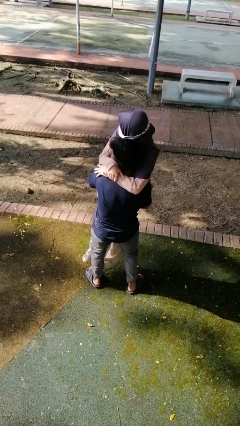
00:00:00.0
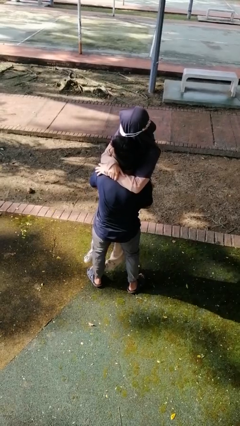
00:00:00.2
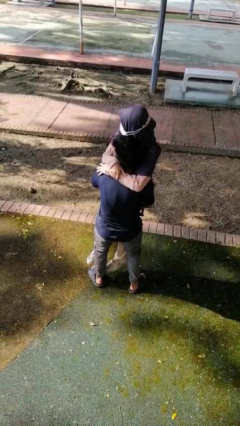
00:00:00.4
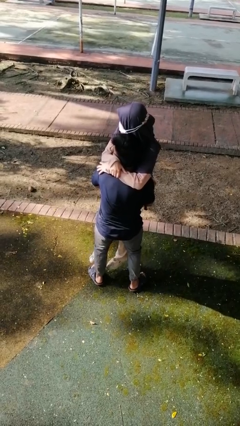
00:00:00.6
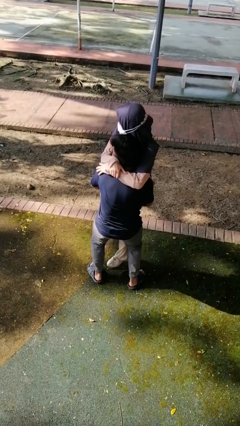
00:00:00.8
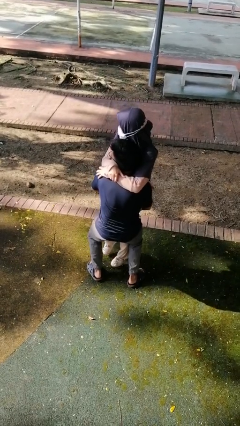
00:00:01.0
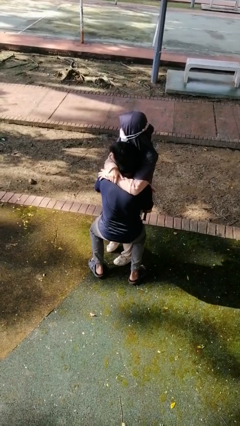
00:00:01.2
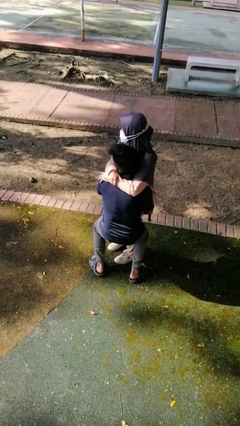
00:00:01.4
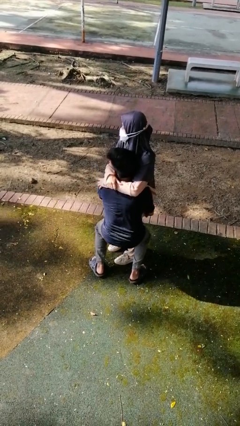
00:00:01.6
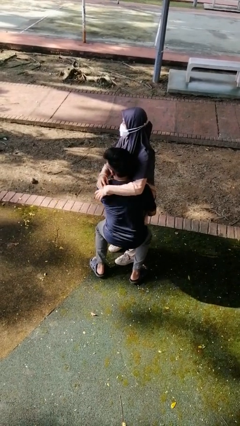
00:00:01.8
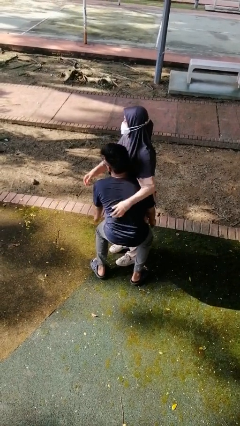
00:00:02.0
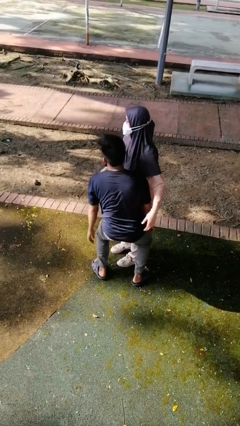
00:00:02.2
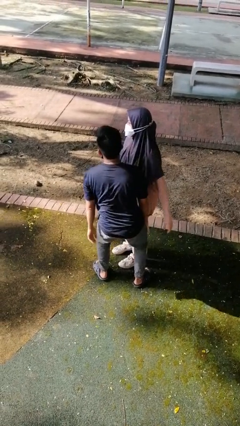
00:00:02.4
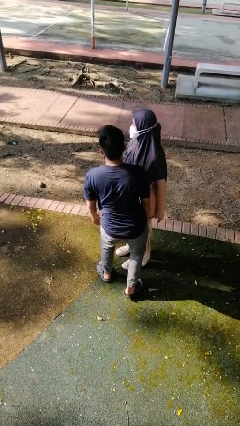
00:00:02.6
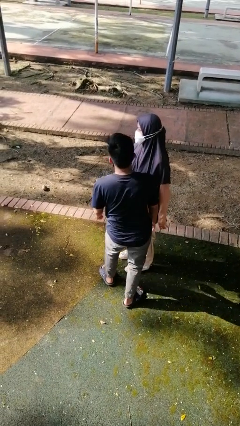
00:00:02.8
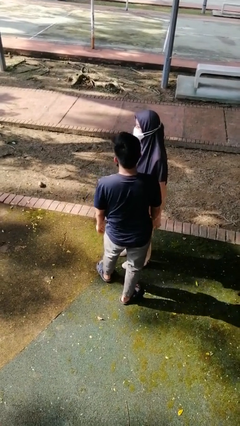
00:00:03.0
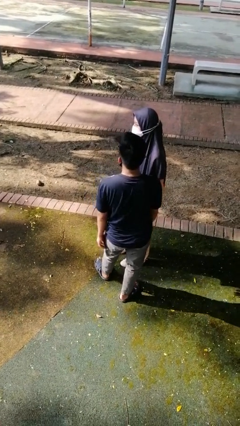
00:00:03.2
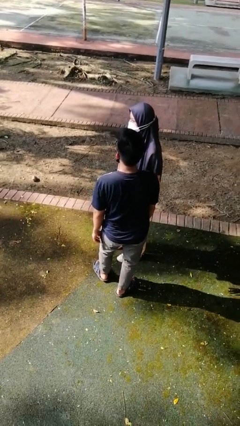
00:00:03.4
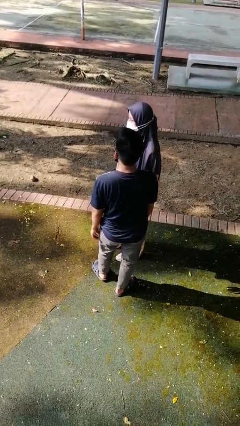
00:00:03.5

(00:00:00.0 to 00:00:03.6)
person puts down person

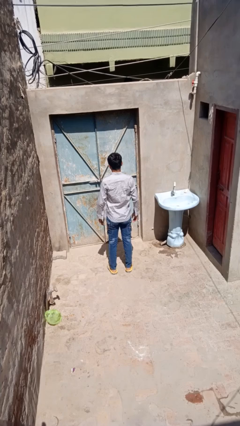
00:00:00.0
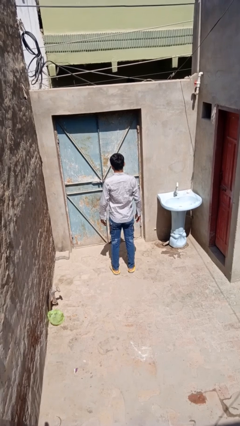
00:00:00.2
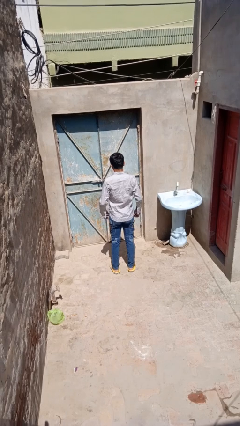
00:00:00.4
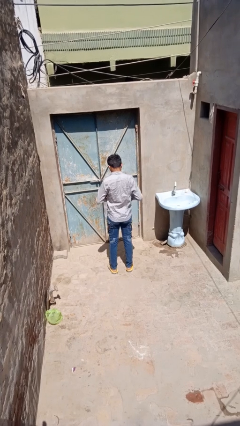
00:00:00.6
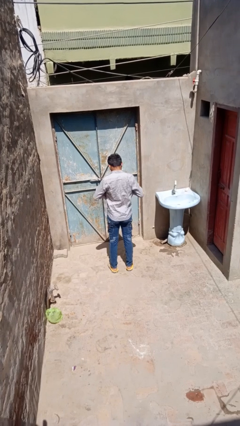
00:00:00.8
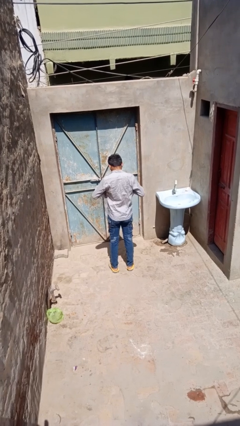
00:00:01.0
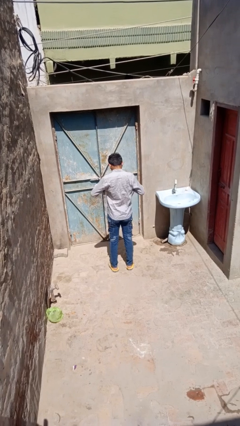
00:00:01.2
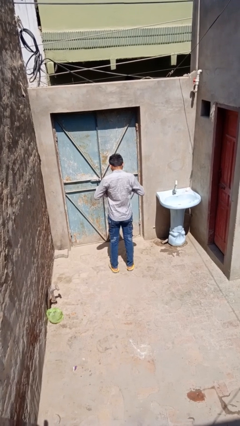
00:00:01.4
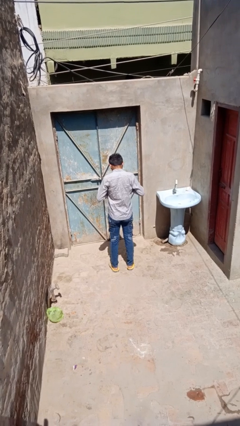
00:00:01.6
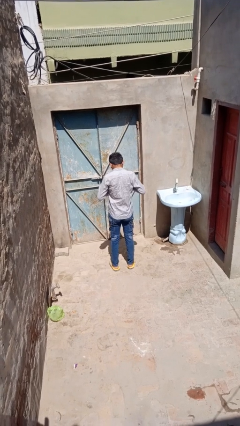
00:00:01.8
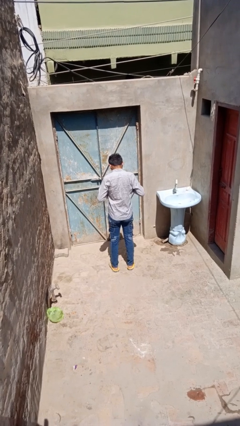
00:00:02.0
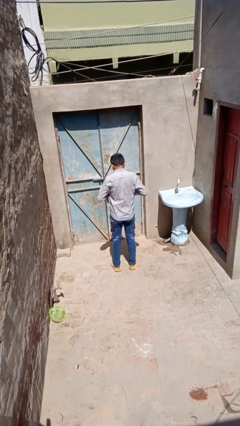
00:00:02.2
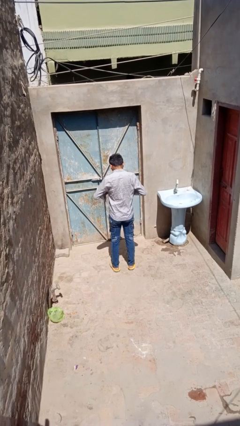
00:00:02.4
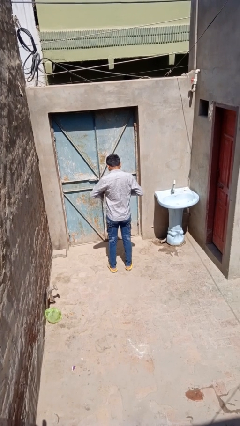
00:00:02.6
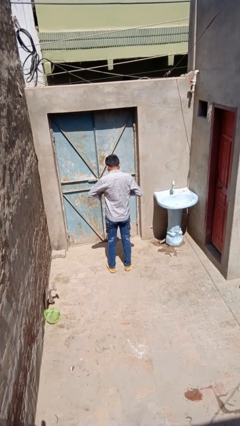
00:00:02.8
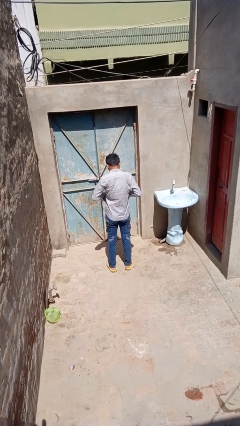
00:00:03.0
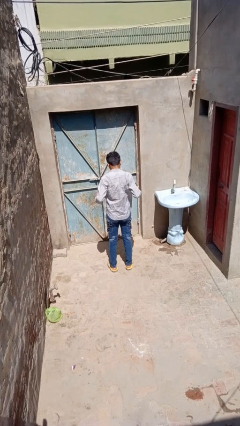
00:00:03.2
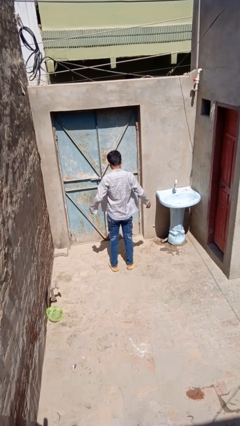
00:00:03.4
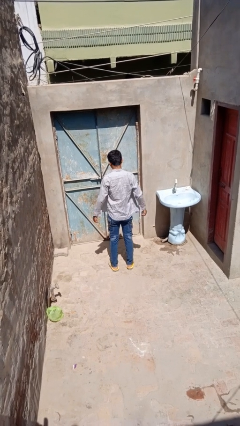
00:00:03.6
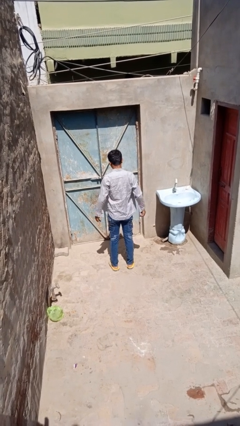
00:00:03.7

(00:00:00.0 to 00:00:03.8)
person unbuttons shirt

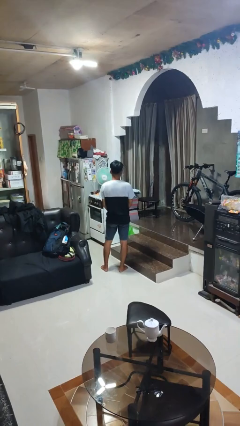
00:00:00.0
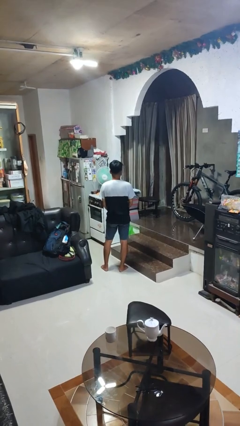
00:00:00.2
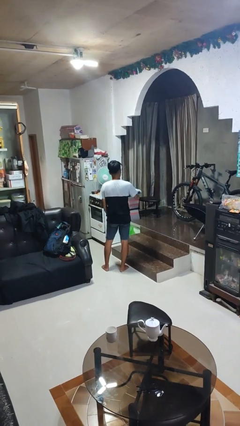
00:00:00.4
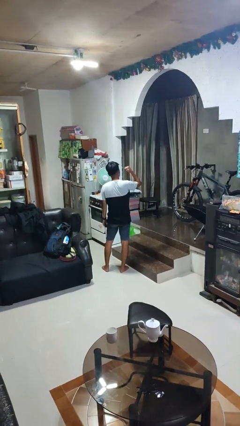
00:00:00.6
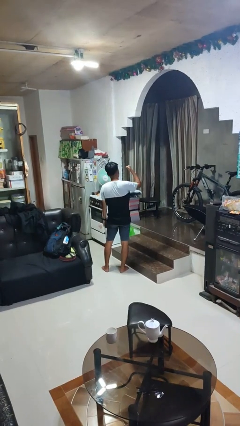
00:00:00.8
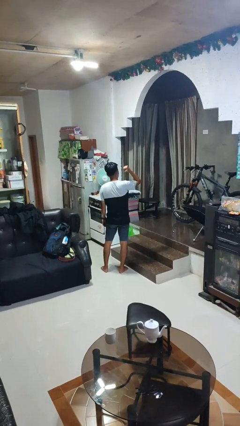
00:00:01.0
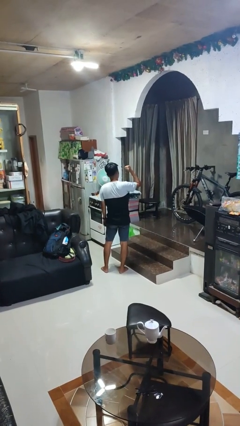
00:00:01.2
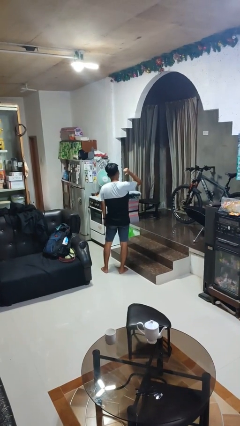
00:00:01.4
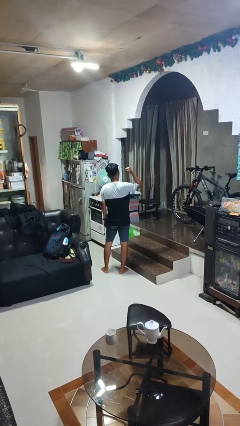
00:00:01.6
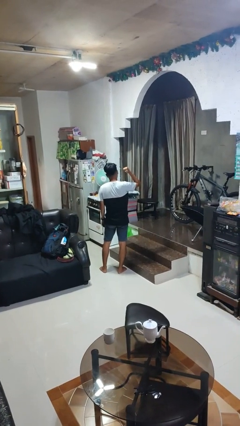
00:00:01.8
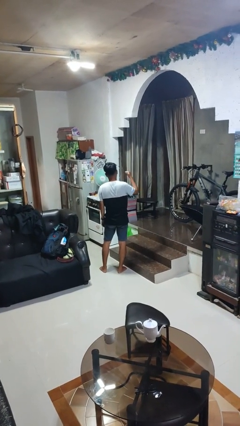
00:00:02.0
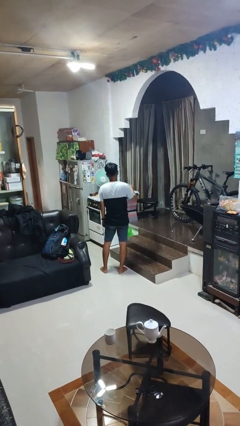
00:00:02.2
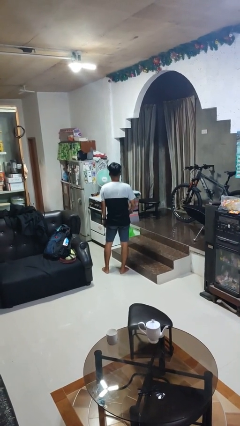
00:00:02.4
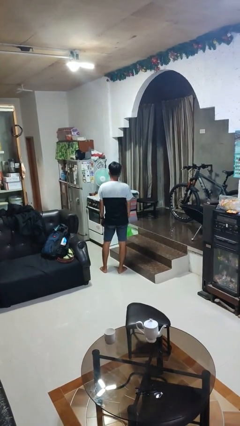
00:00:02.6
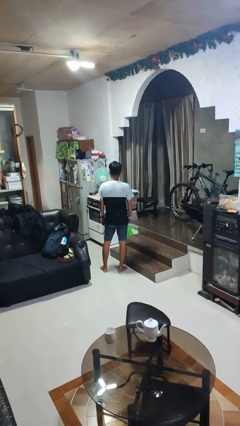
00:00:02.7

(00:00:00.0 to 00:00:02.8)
person gestures behind me

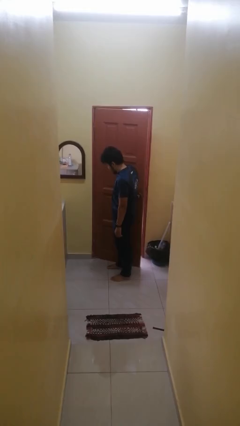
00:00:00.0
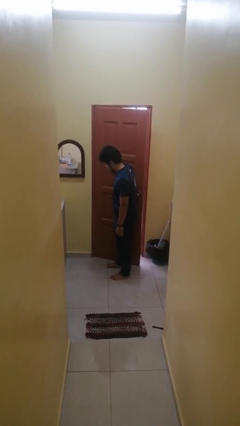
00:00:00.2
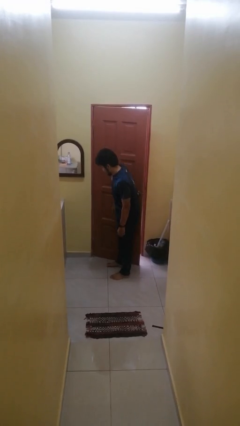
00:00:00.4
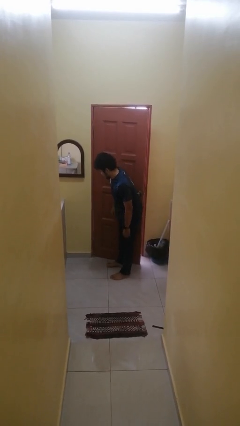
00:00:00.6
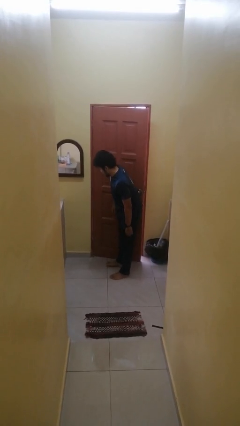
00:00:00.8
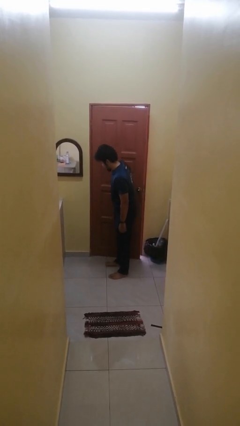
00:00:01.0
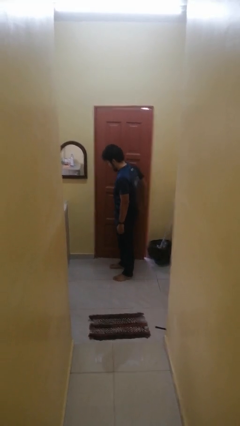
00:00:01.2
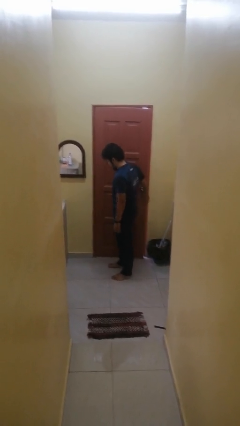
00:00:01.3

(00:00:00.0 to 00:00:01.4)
person closes door with hip

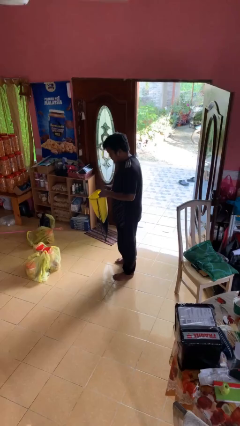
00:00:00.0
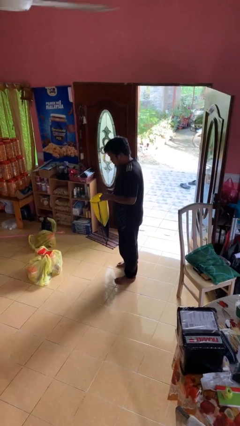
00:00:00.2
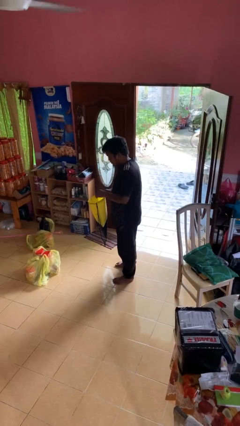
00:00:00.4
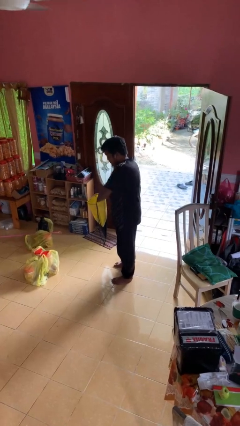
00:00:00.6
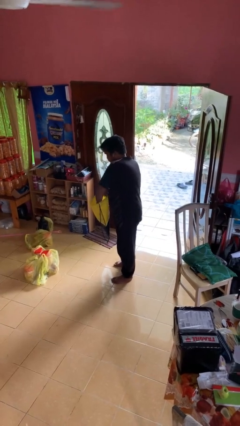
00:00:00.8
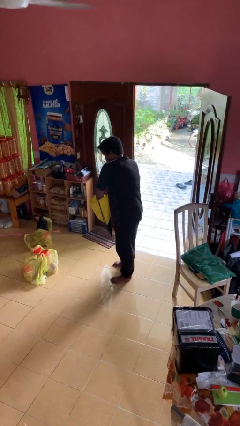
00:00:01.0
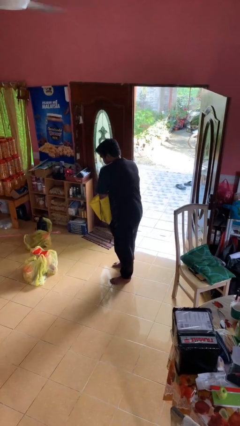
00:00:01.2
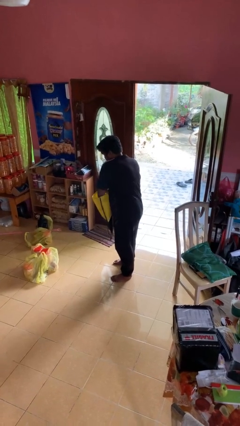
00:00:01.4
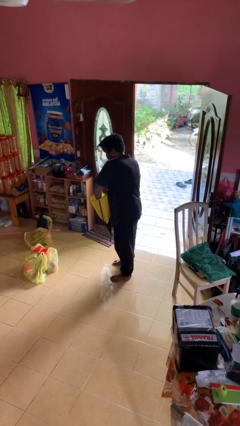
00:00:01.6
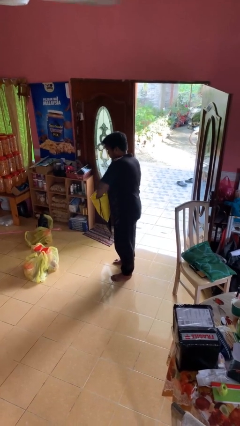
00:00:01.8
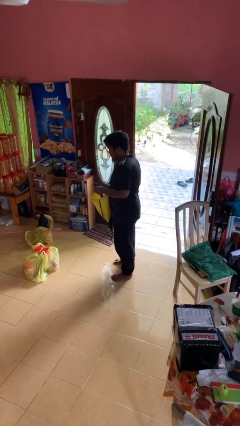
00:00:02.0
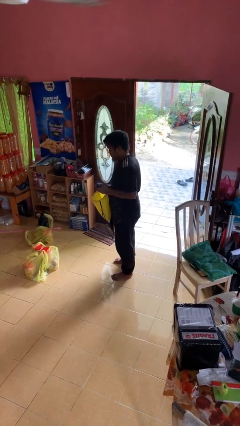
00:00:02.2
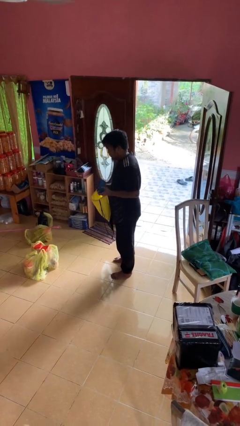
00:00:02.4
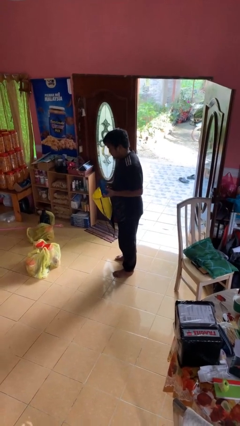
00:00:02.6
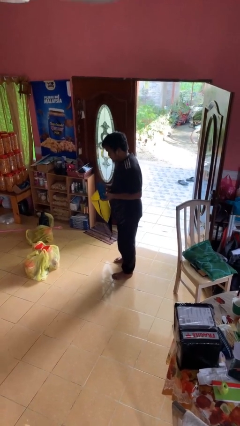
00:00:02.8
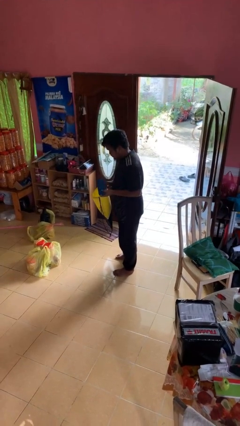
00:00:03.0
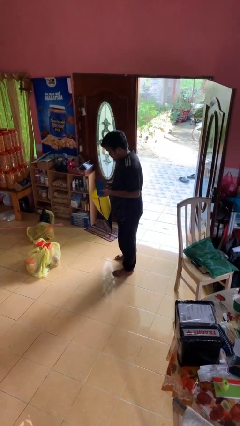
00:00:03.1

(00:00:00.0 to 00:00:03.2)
person takes object from bag

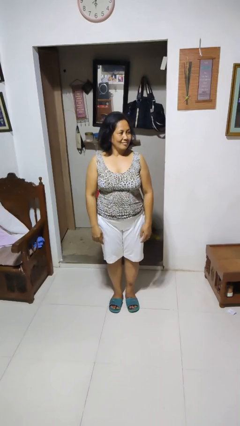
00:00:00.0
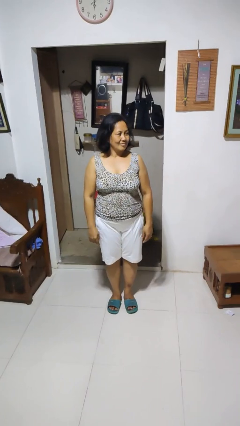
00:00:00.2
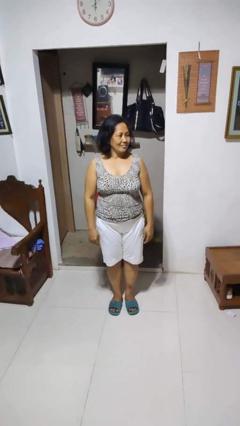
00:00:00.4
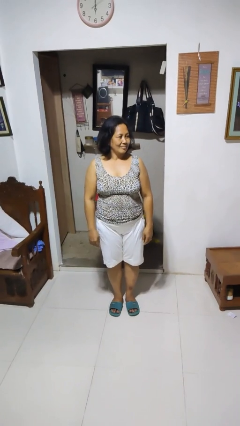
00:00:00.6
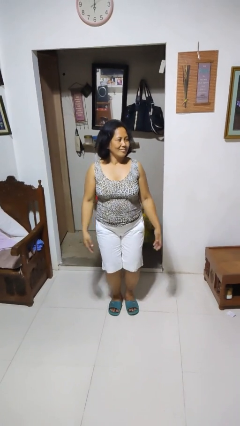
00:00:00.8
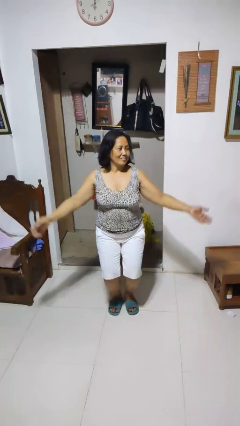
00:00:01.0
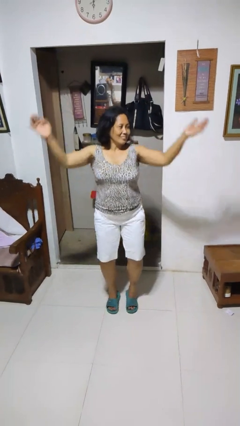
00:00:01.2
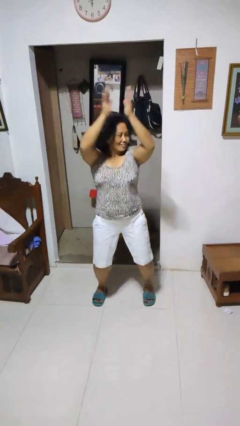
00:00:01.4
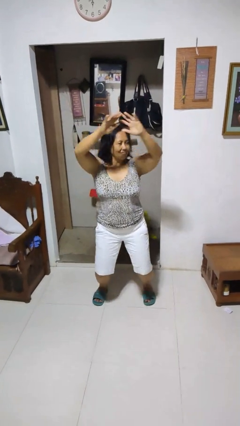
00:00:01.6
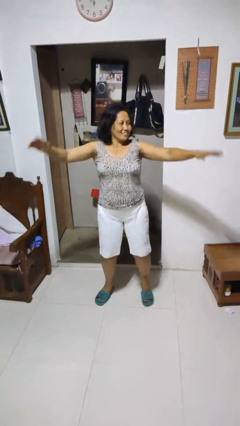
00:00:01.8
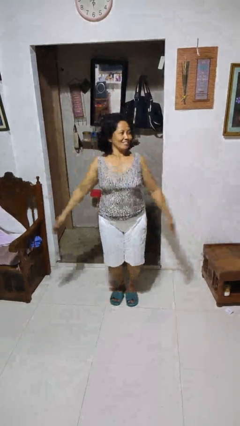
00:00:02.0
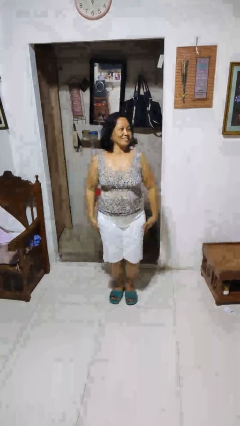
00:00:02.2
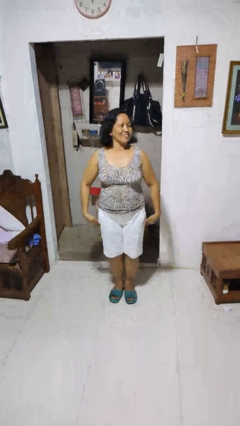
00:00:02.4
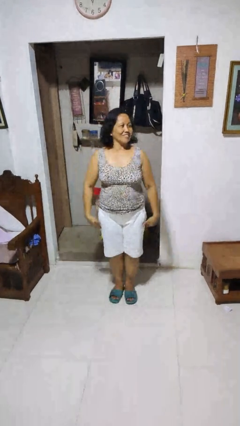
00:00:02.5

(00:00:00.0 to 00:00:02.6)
person exercises with jumping jacks
